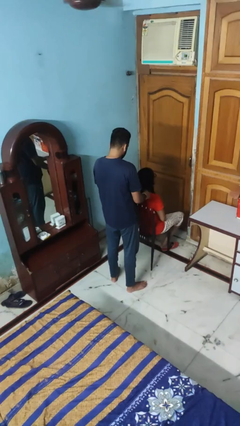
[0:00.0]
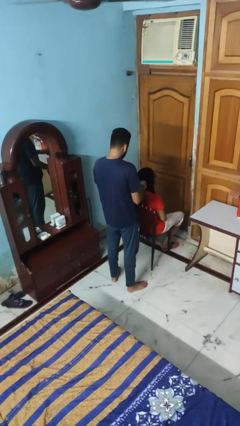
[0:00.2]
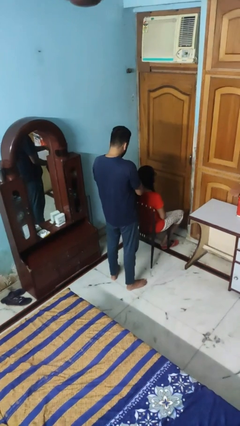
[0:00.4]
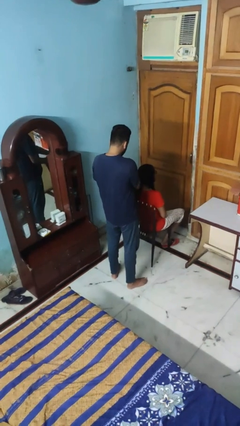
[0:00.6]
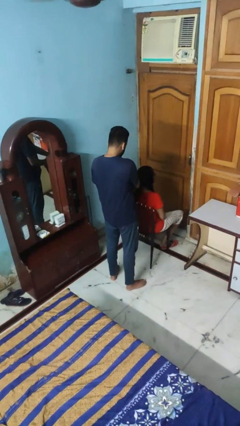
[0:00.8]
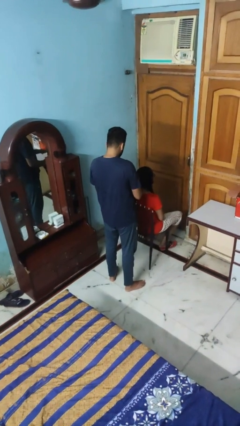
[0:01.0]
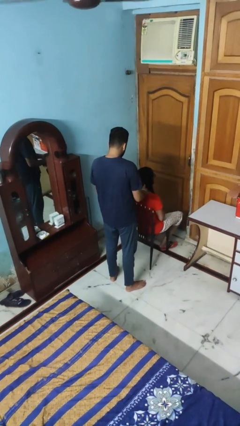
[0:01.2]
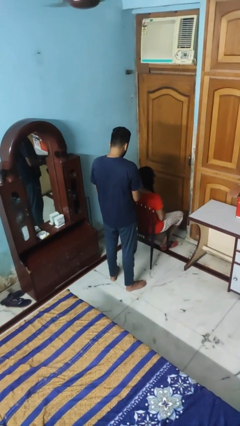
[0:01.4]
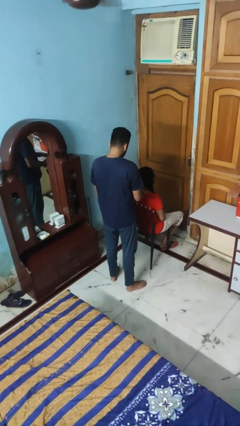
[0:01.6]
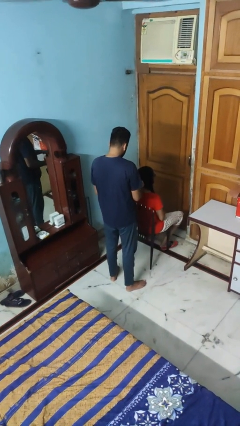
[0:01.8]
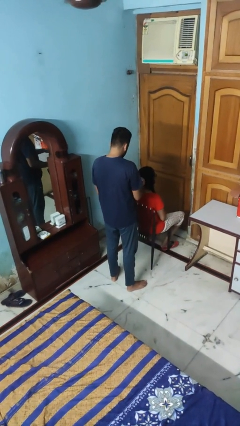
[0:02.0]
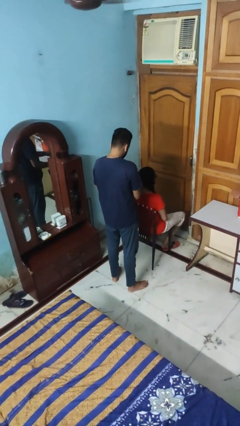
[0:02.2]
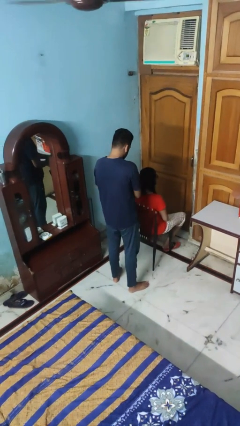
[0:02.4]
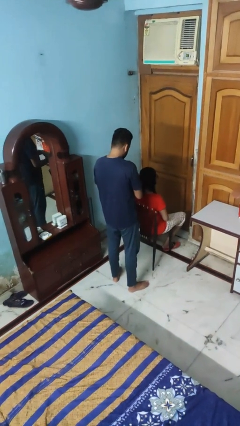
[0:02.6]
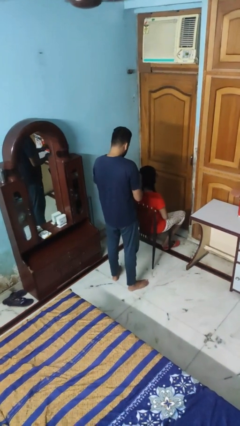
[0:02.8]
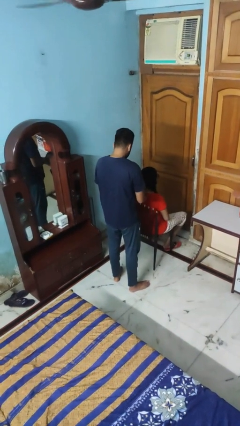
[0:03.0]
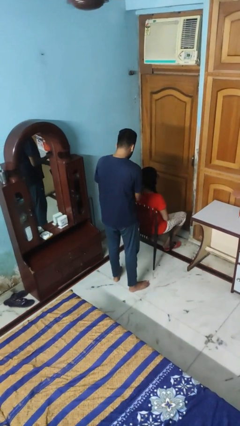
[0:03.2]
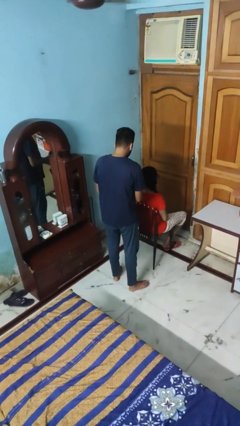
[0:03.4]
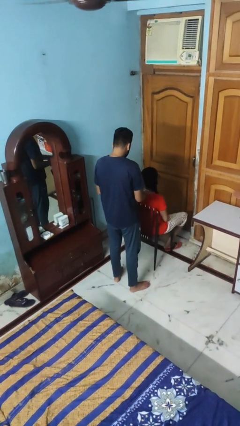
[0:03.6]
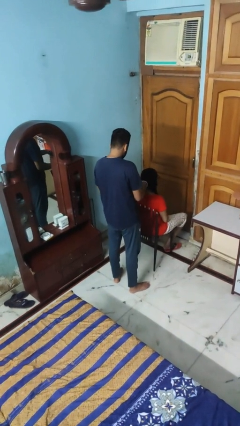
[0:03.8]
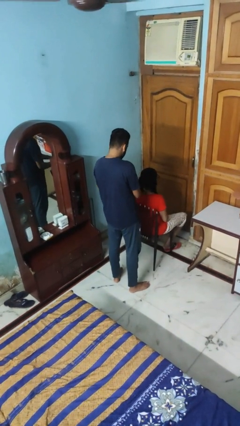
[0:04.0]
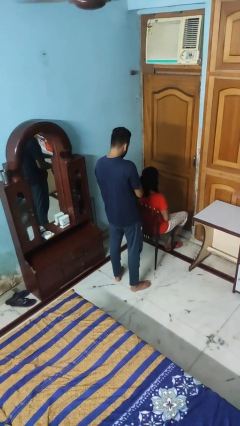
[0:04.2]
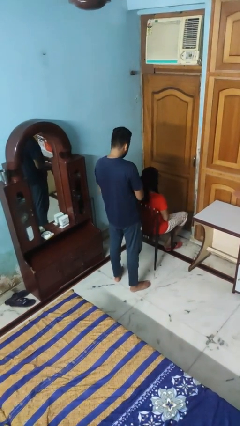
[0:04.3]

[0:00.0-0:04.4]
person braids hair of person

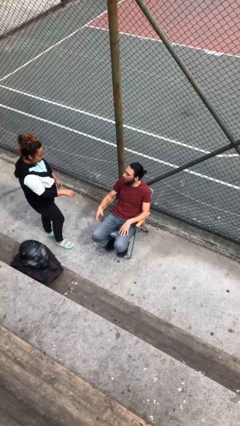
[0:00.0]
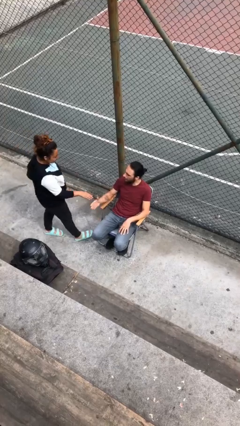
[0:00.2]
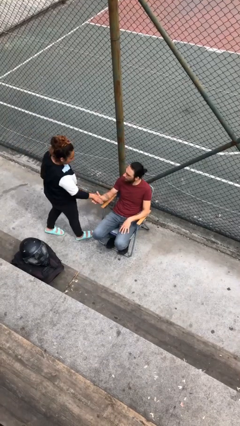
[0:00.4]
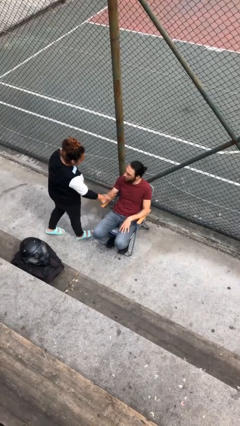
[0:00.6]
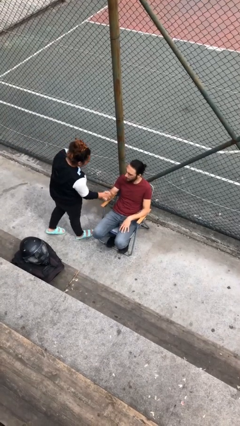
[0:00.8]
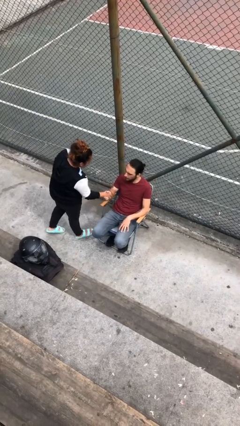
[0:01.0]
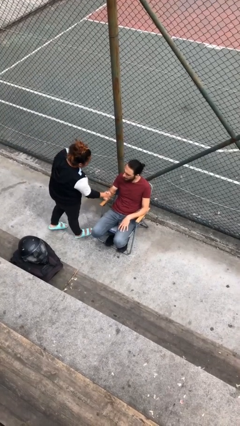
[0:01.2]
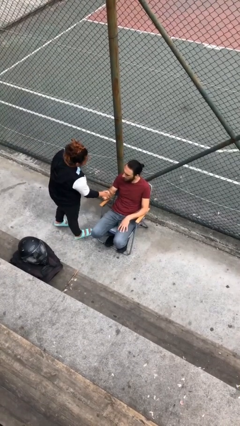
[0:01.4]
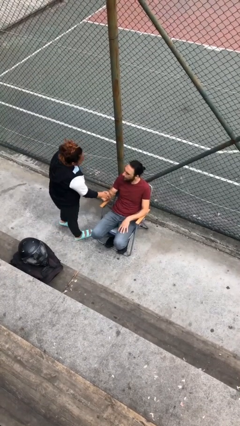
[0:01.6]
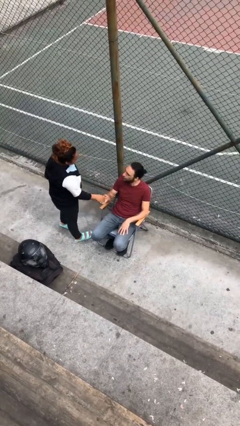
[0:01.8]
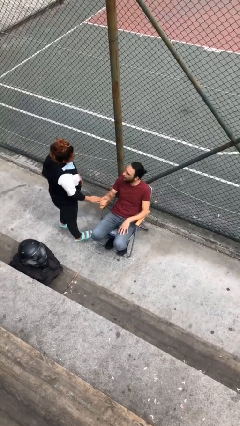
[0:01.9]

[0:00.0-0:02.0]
person shakes hand

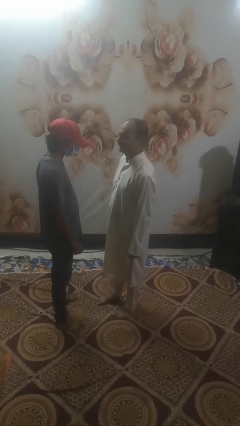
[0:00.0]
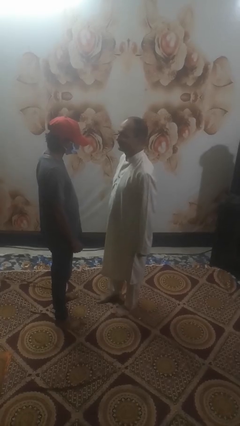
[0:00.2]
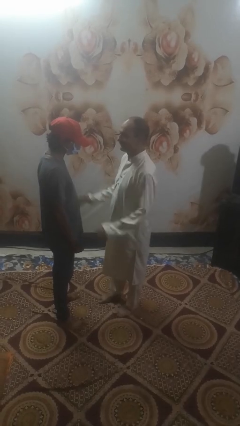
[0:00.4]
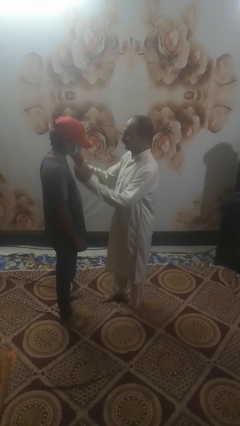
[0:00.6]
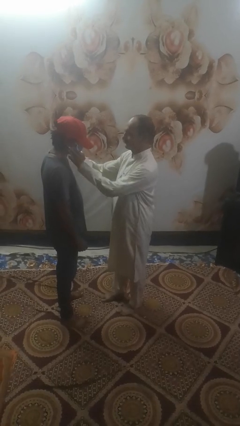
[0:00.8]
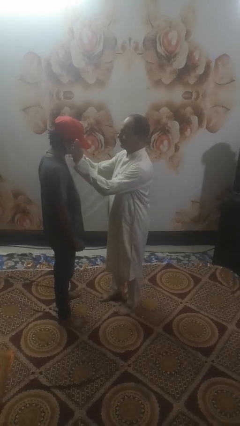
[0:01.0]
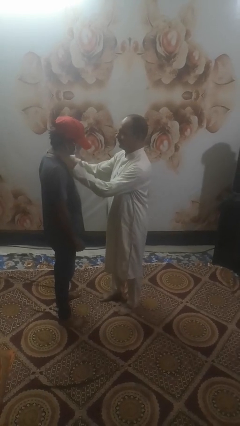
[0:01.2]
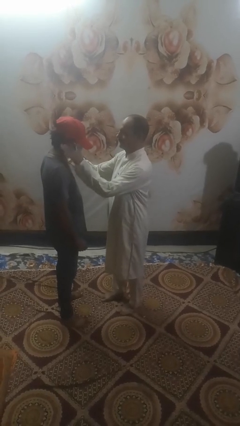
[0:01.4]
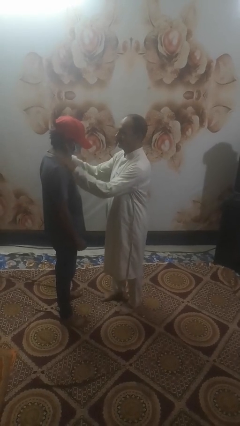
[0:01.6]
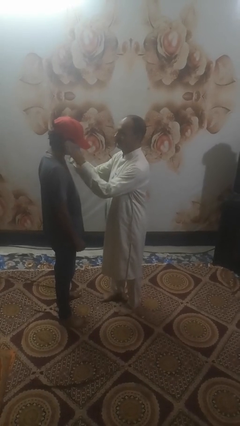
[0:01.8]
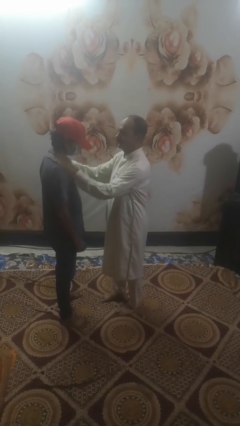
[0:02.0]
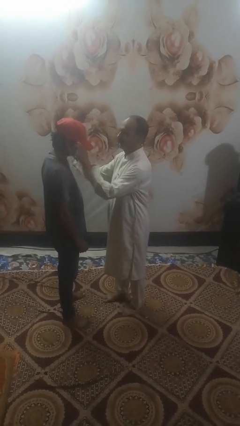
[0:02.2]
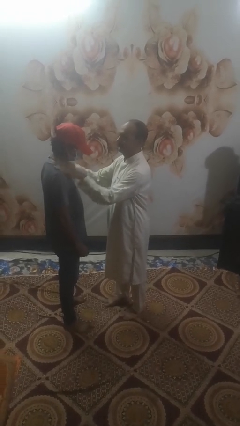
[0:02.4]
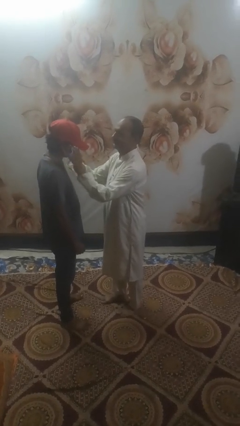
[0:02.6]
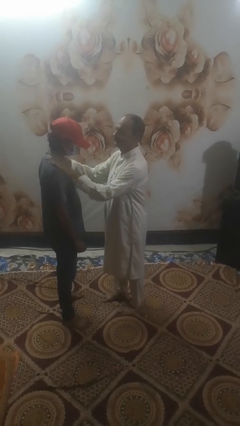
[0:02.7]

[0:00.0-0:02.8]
person pounds shoulders of person

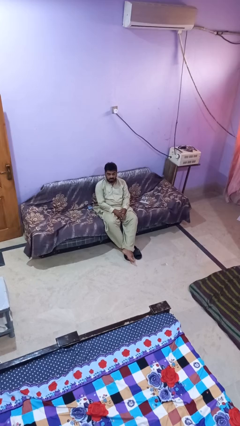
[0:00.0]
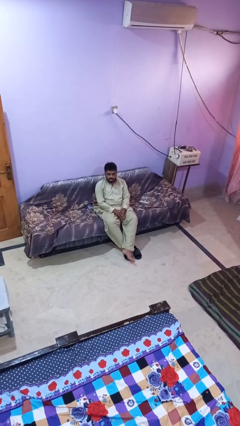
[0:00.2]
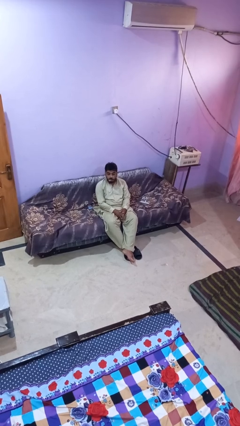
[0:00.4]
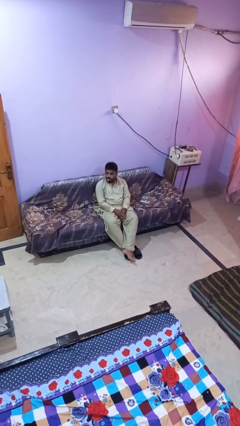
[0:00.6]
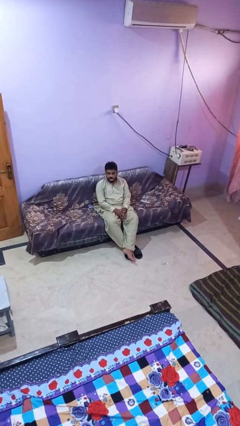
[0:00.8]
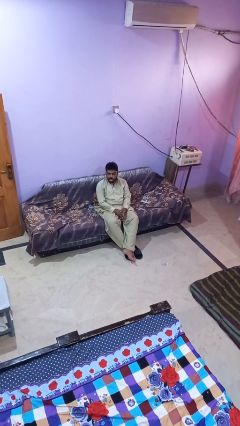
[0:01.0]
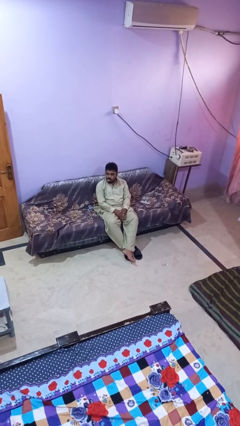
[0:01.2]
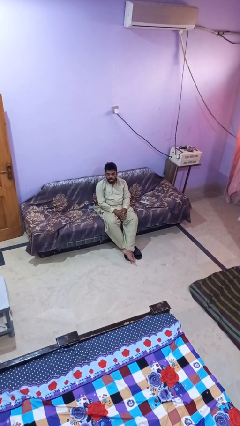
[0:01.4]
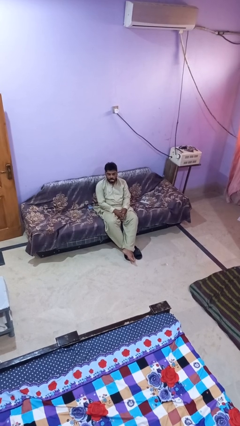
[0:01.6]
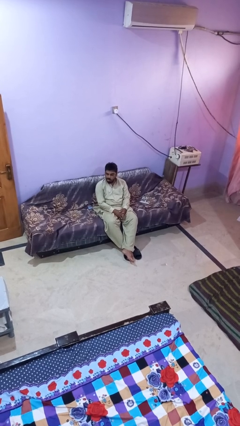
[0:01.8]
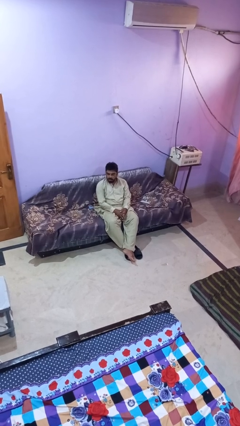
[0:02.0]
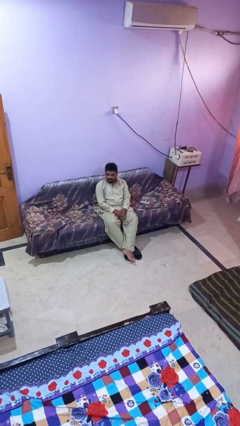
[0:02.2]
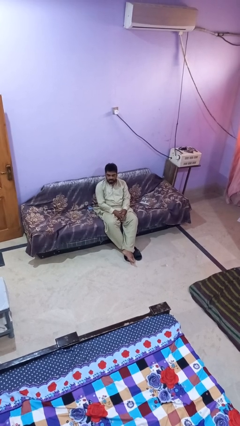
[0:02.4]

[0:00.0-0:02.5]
person sticks out tongue

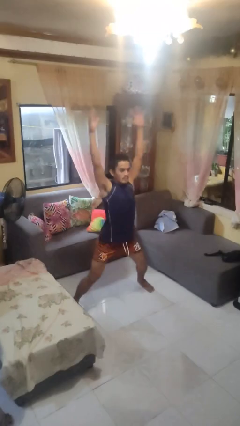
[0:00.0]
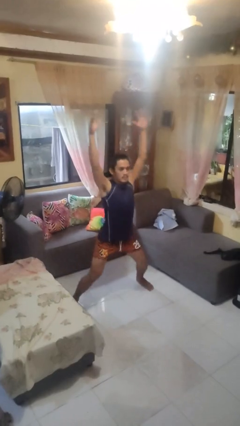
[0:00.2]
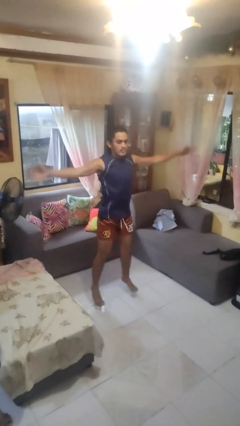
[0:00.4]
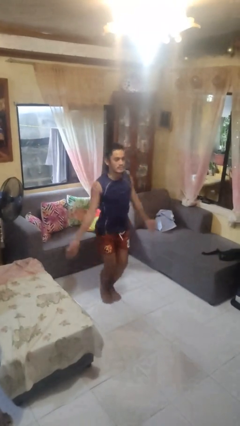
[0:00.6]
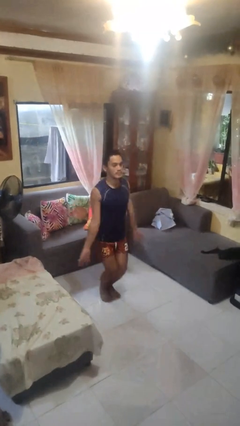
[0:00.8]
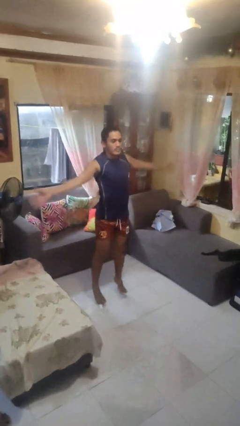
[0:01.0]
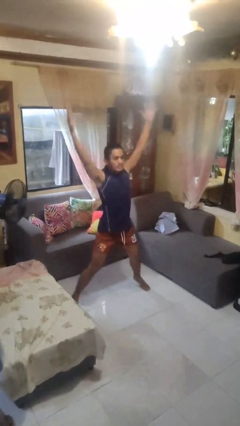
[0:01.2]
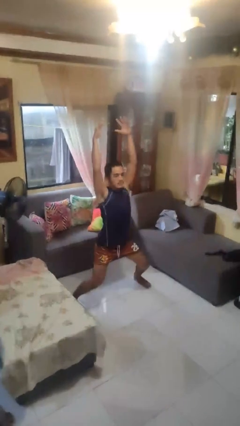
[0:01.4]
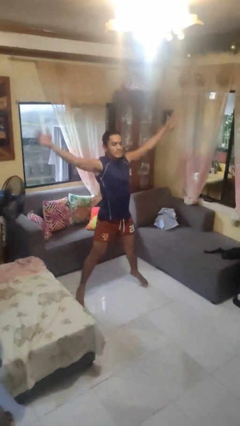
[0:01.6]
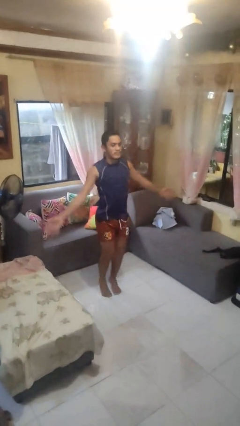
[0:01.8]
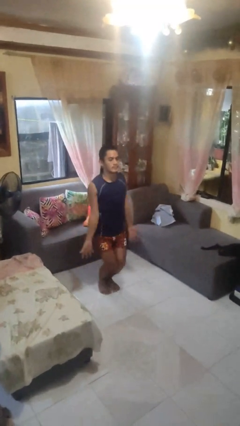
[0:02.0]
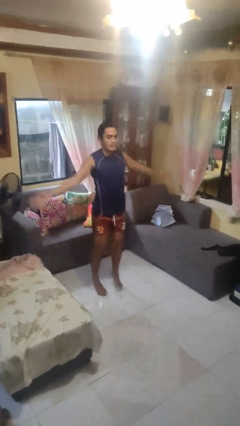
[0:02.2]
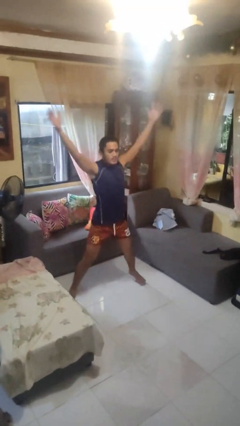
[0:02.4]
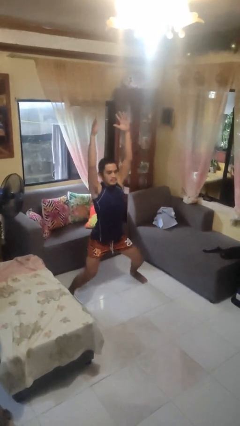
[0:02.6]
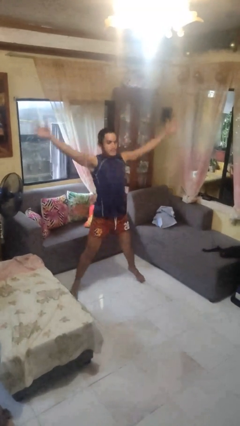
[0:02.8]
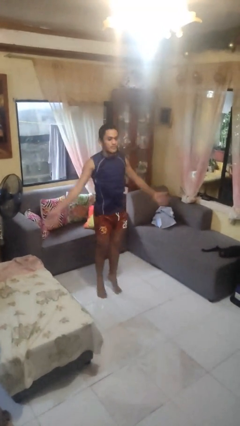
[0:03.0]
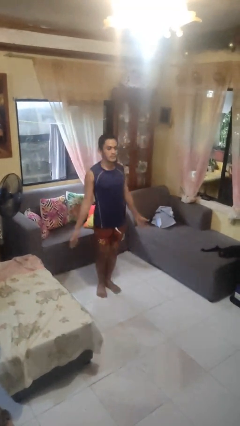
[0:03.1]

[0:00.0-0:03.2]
person exercises with jumping jacks

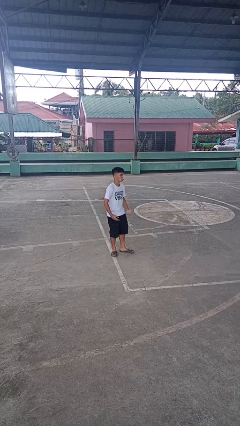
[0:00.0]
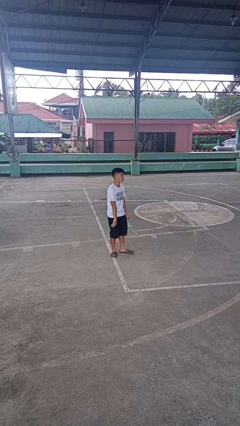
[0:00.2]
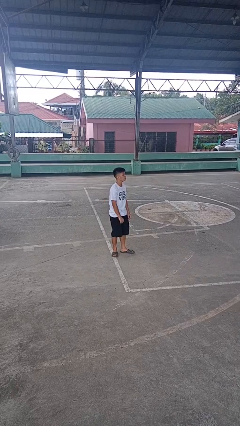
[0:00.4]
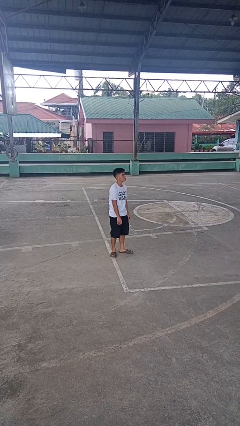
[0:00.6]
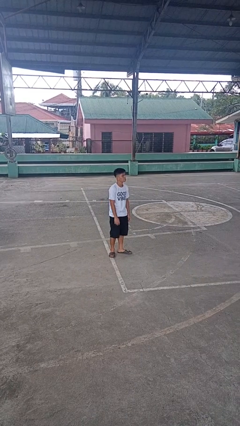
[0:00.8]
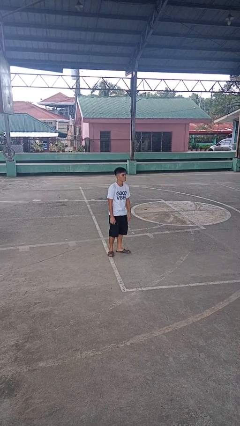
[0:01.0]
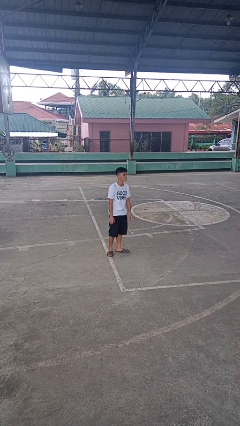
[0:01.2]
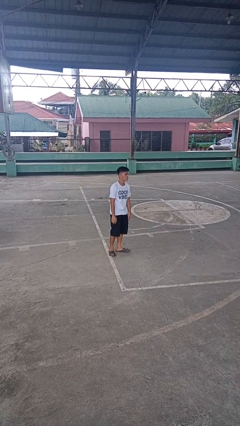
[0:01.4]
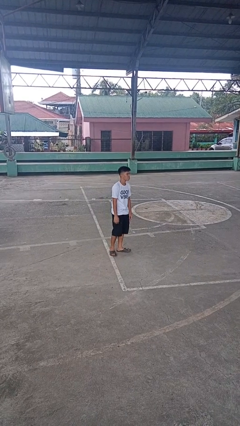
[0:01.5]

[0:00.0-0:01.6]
person shrugs

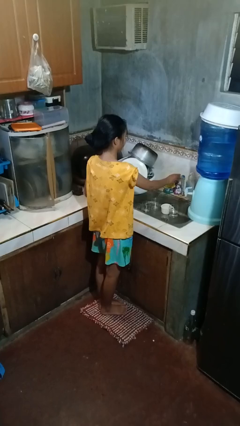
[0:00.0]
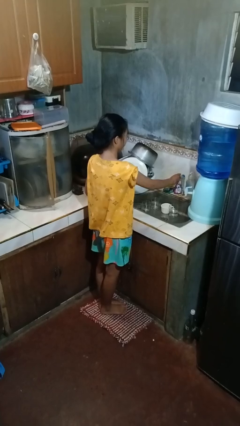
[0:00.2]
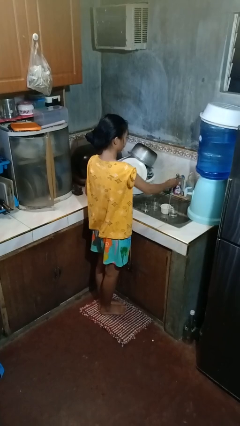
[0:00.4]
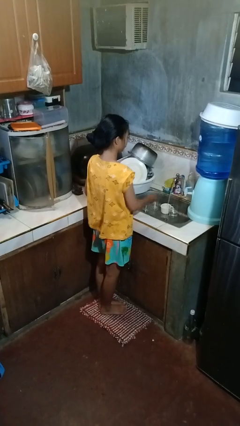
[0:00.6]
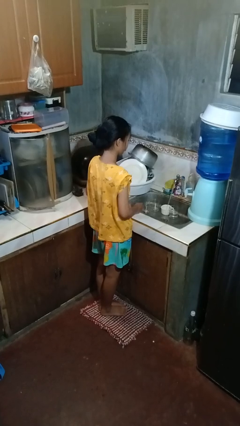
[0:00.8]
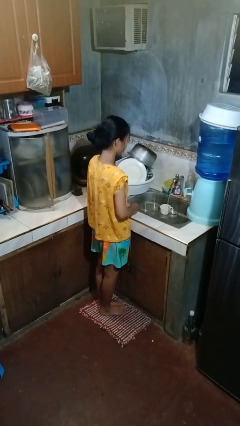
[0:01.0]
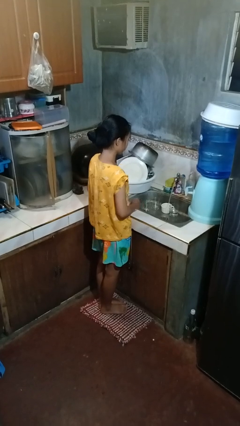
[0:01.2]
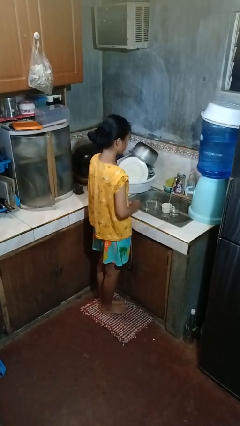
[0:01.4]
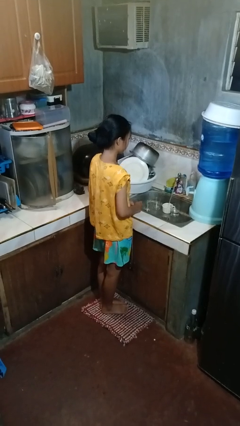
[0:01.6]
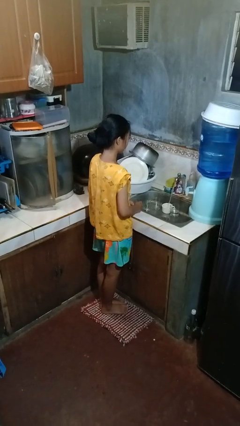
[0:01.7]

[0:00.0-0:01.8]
person turns on faucet
